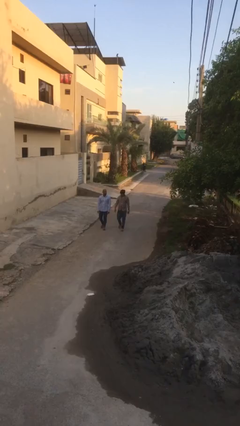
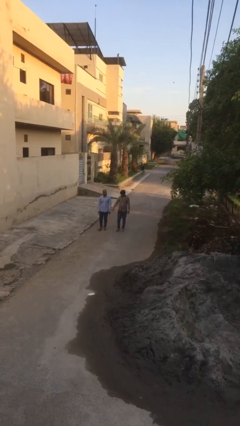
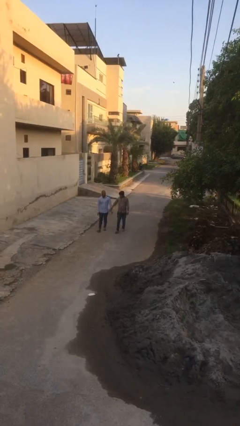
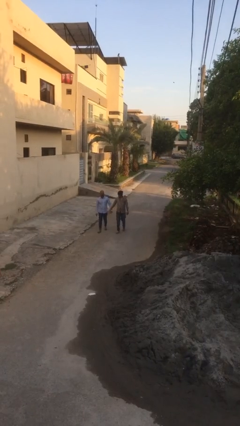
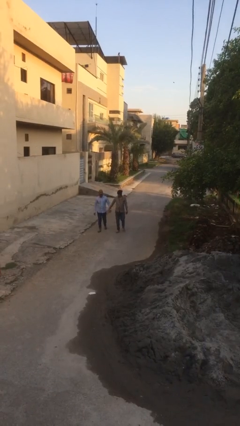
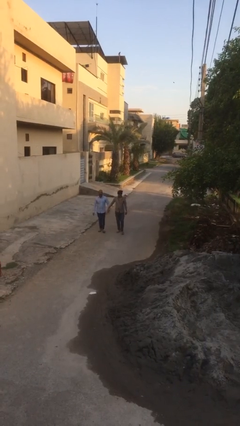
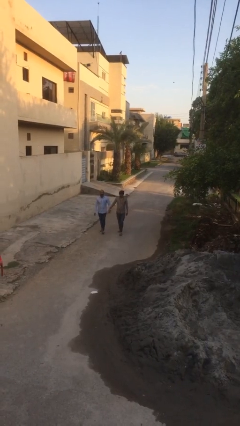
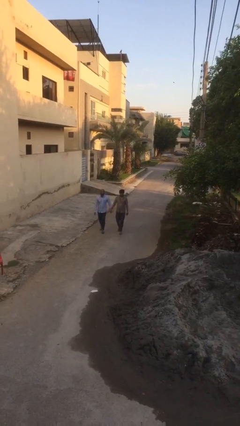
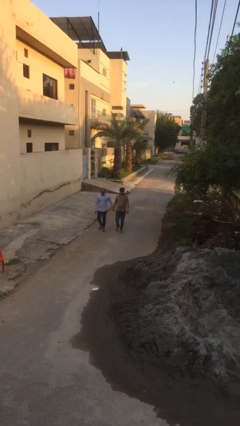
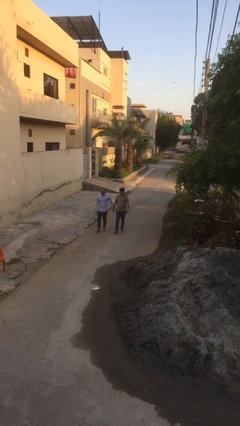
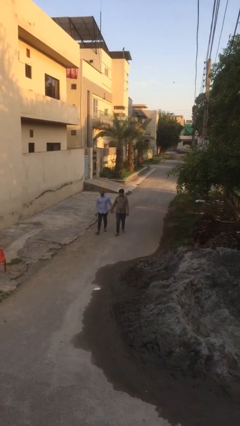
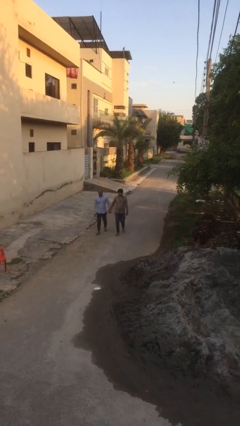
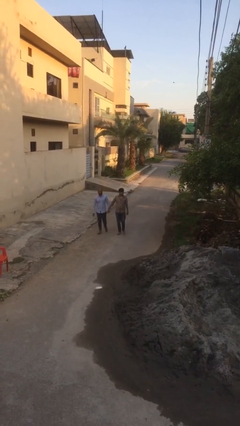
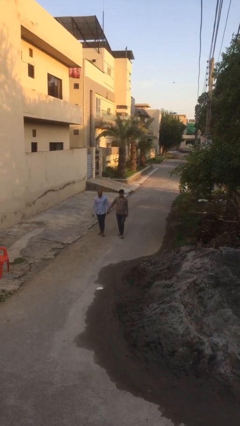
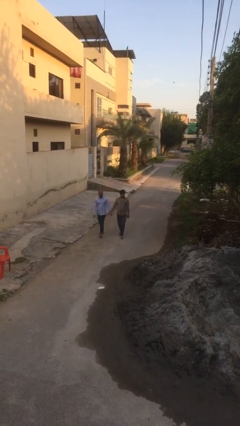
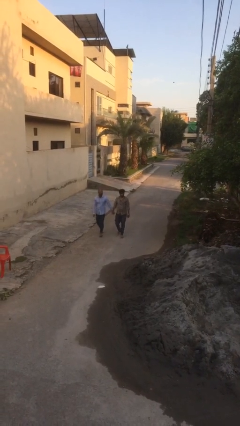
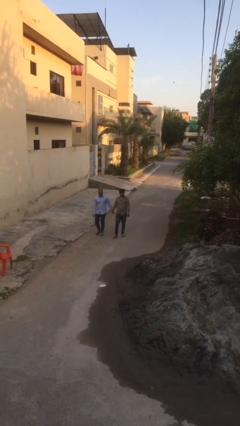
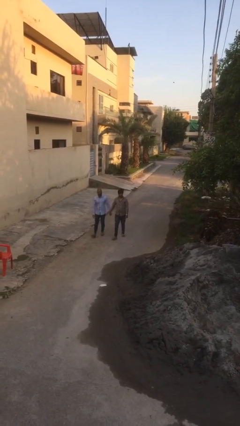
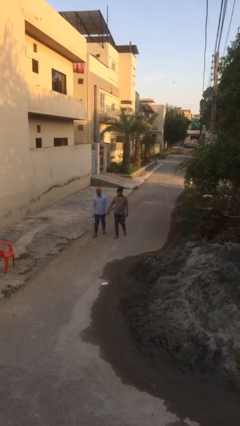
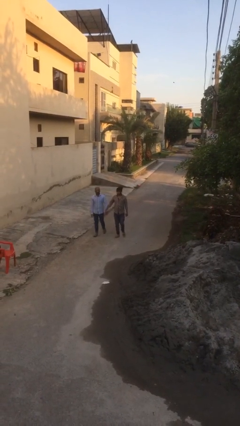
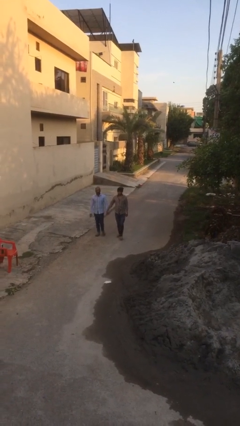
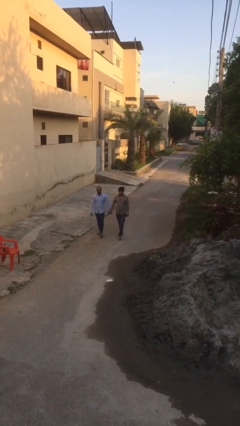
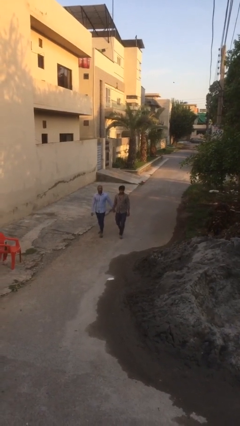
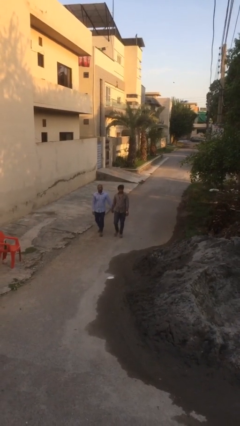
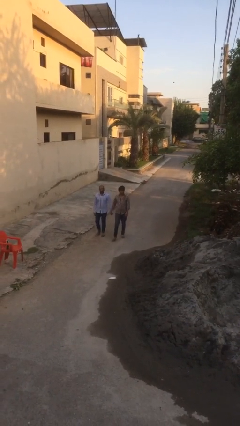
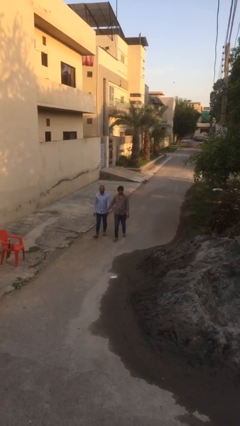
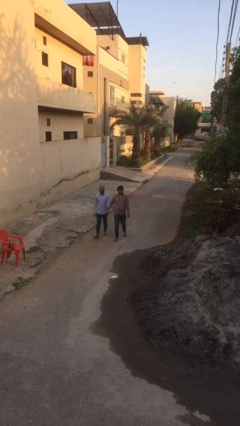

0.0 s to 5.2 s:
person holds hand

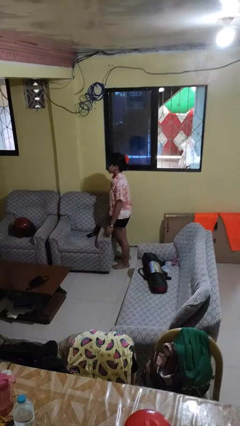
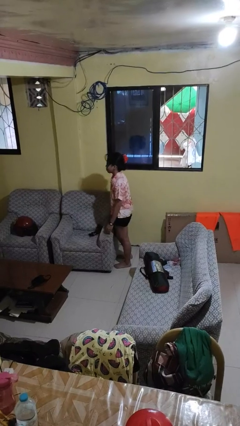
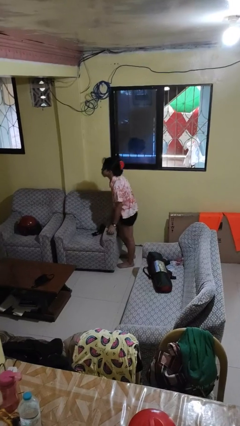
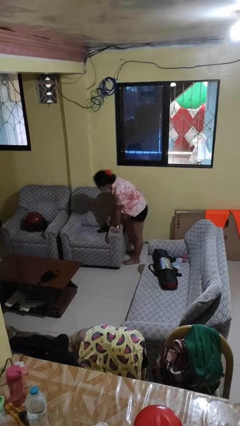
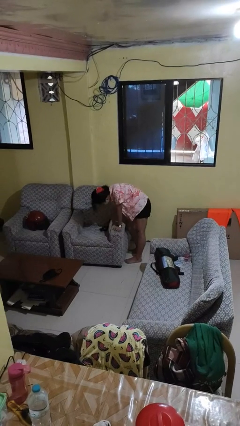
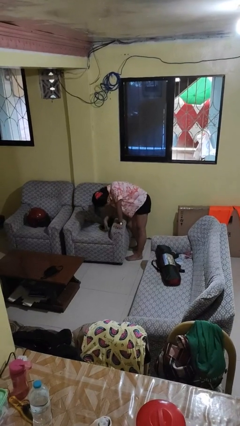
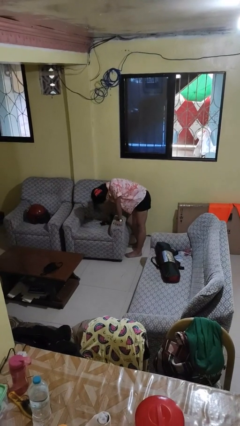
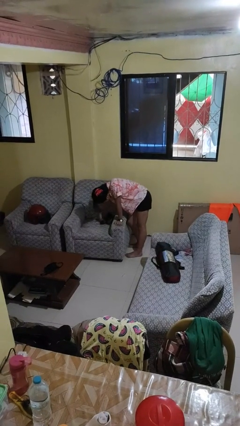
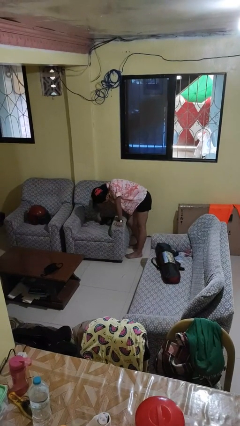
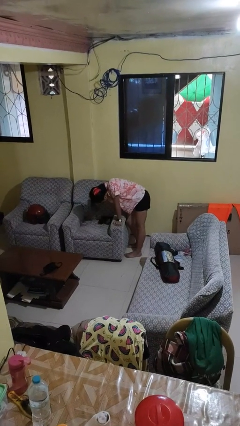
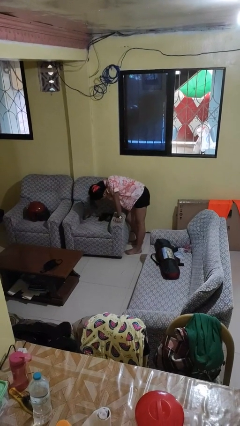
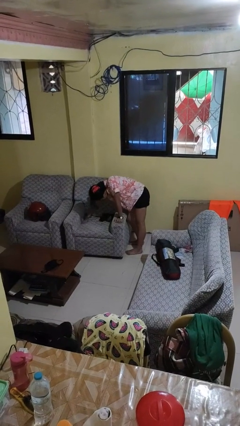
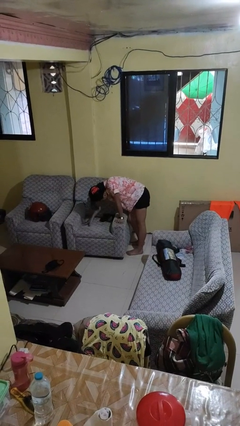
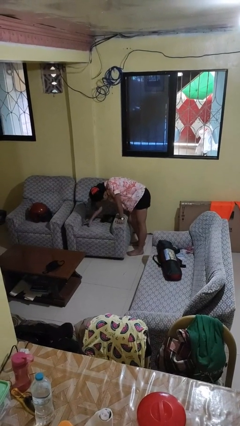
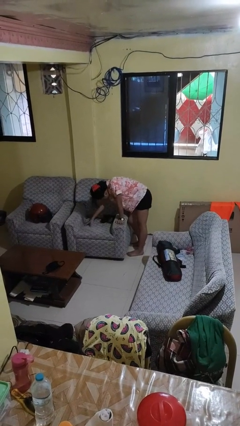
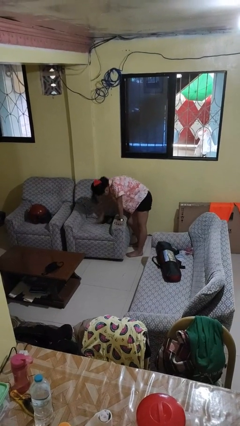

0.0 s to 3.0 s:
person searches under couch

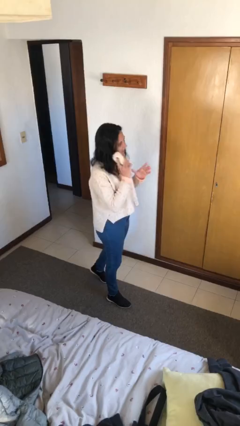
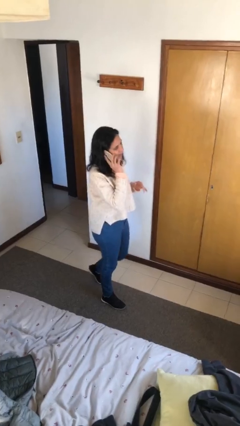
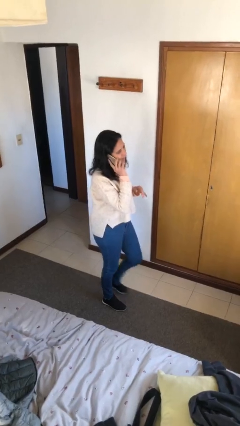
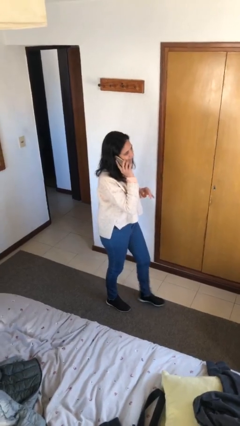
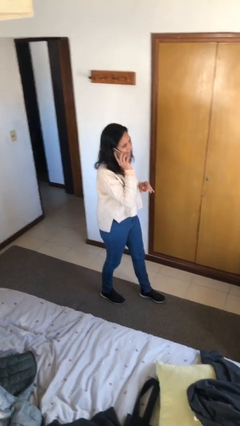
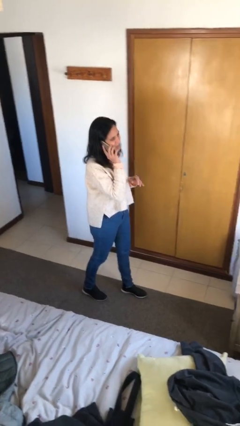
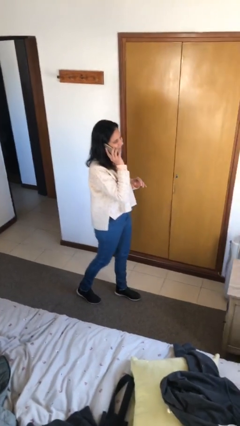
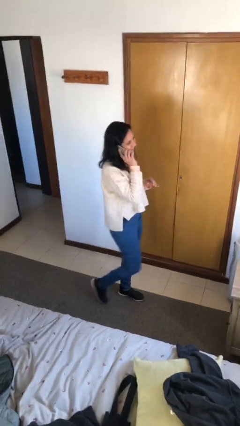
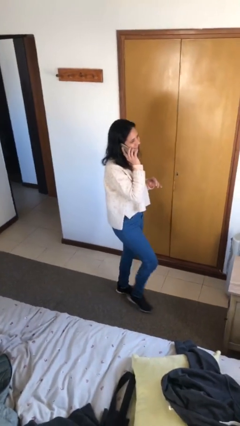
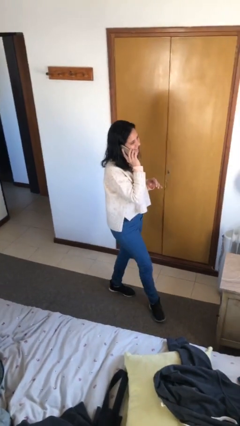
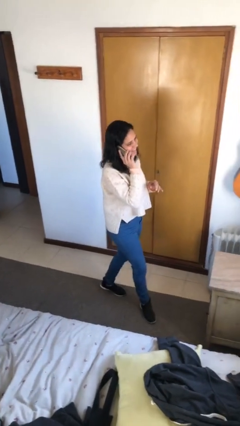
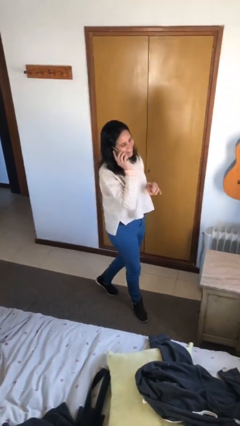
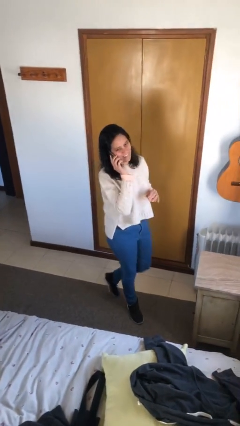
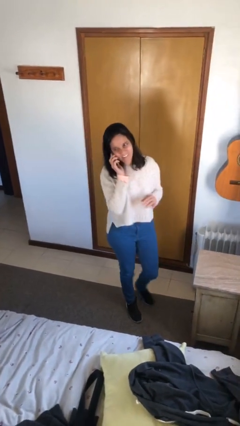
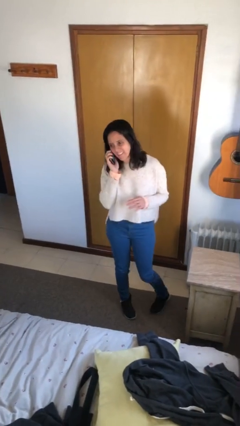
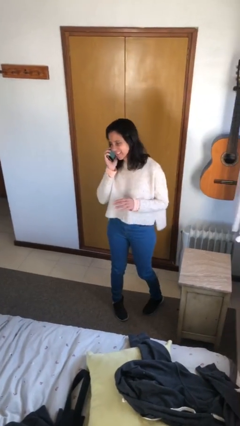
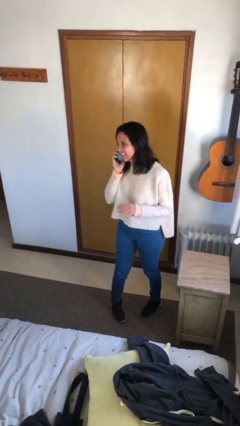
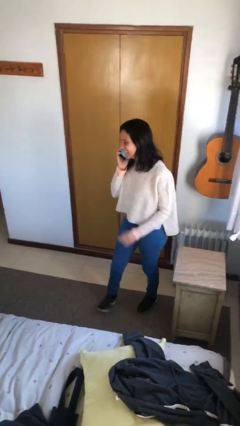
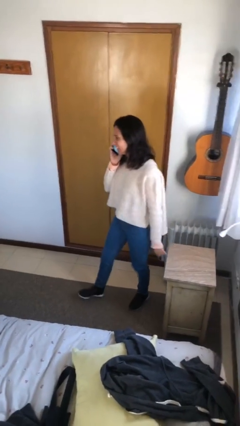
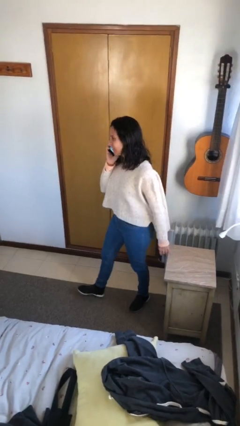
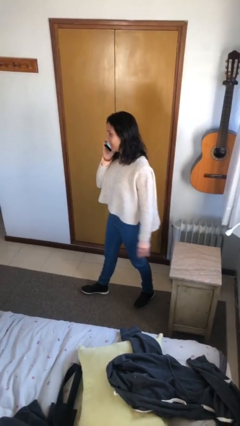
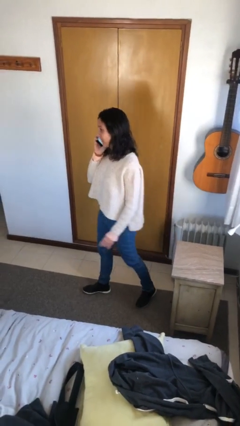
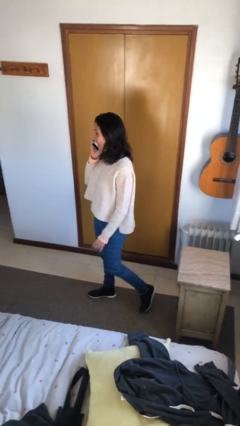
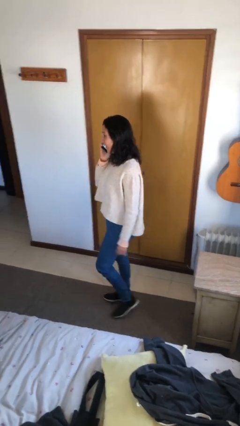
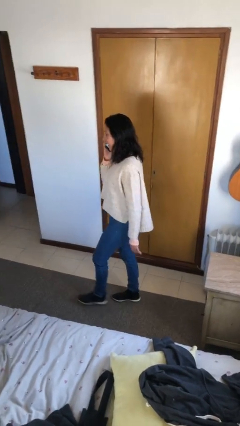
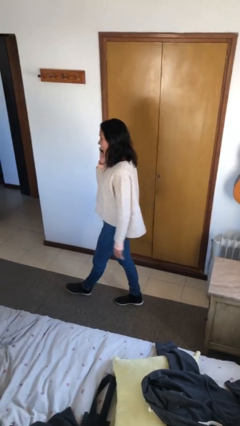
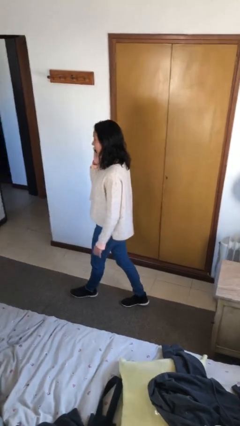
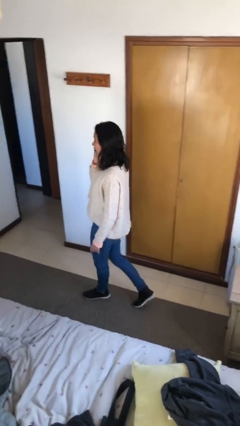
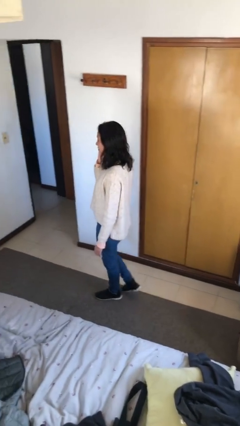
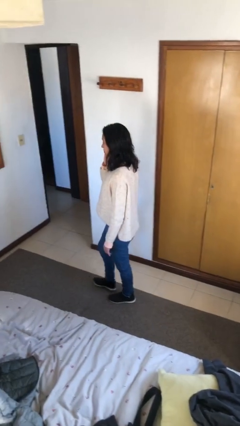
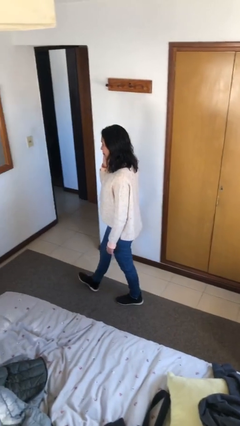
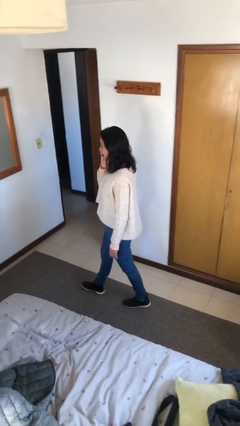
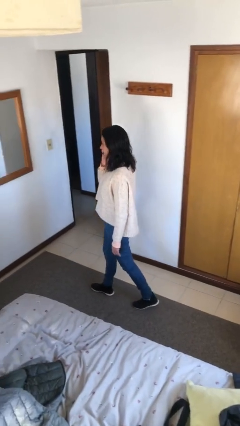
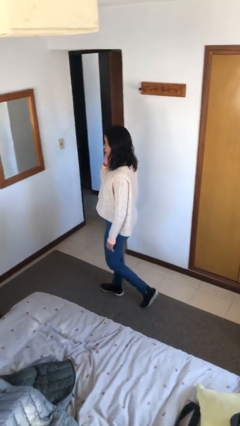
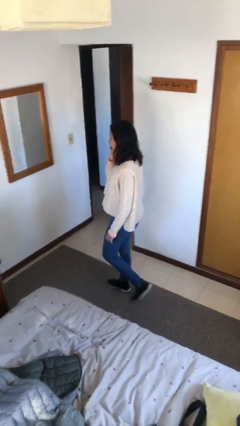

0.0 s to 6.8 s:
person talks on phone

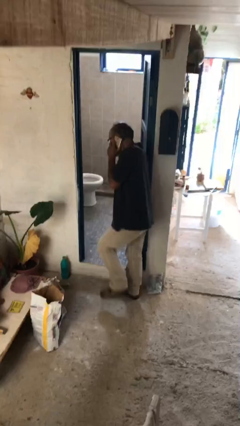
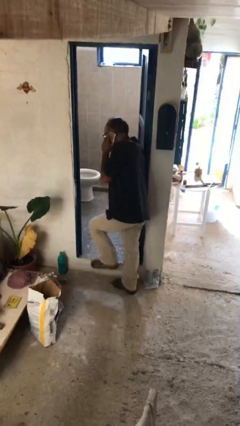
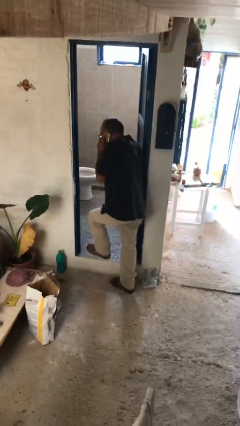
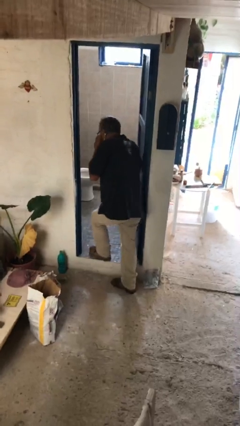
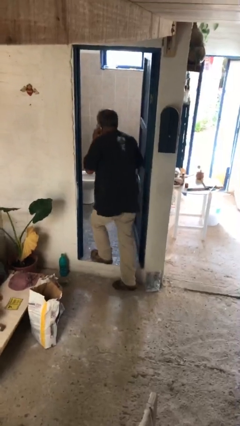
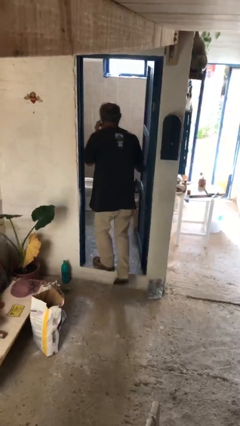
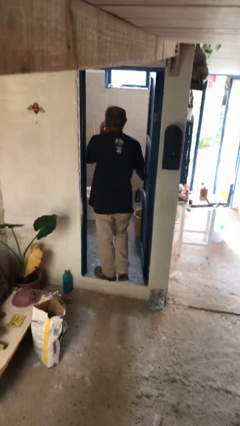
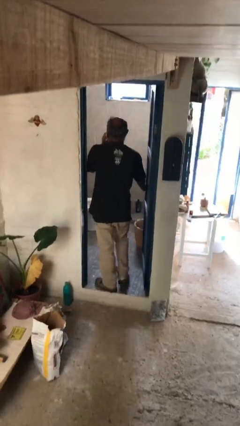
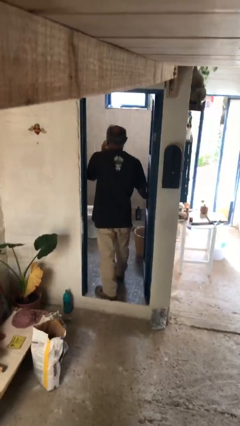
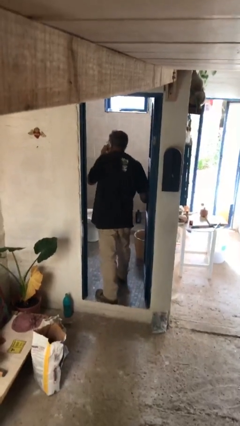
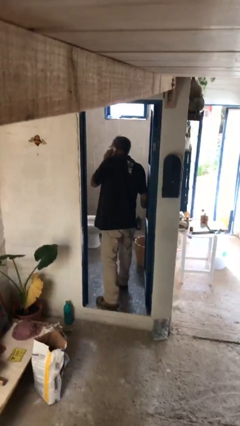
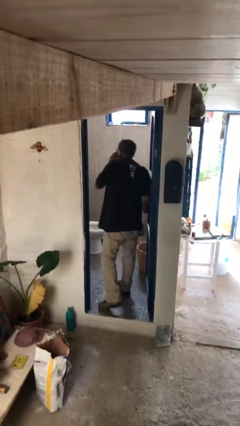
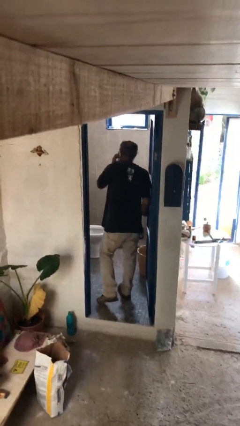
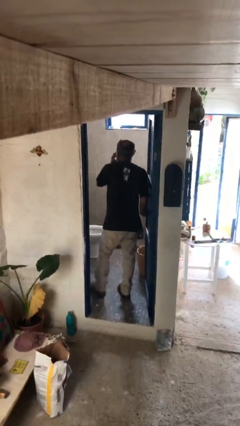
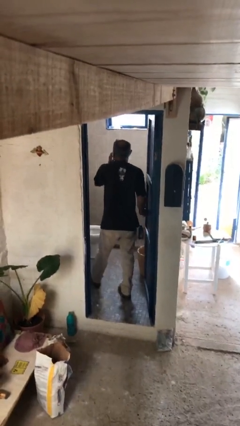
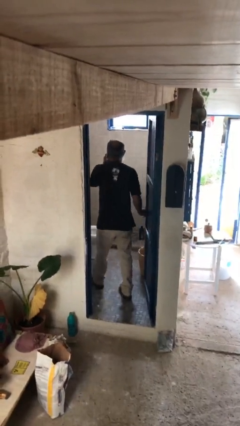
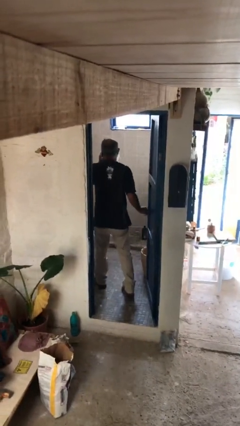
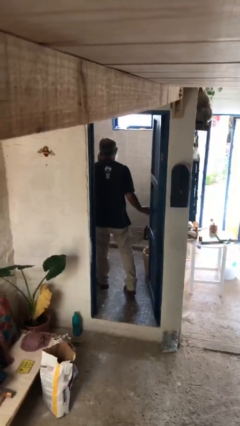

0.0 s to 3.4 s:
person exits scene through structure
